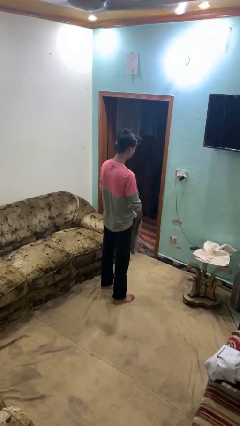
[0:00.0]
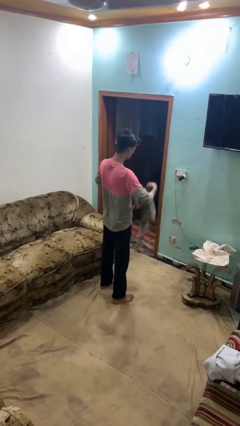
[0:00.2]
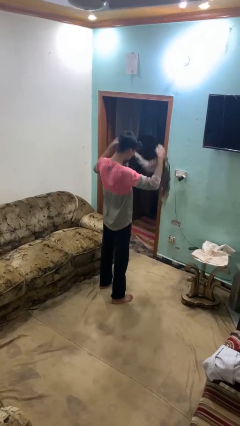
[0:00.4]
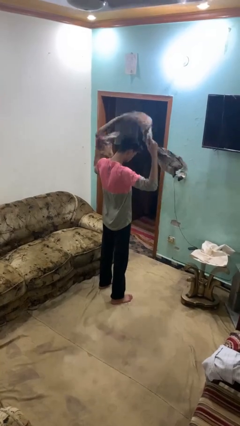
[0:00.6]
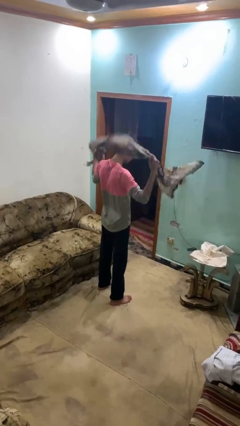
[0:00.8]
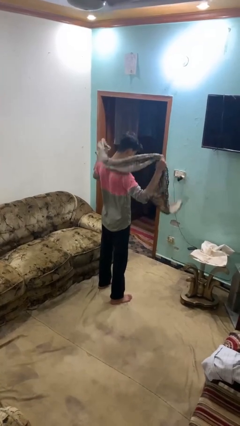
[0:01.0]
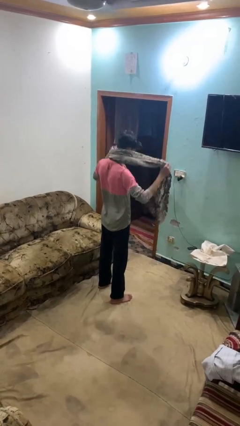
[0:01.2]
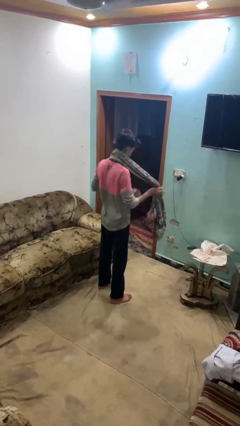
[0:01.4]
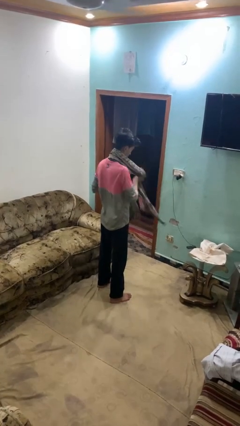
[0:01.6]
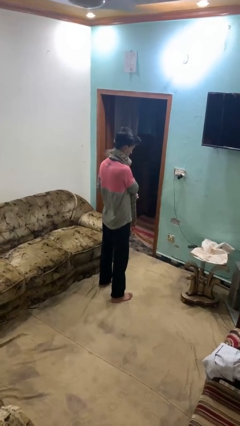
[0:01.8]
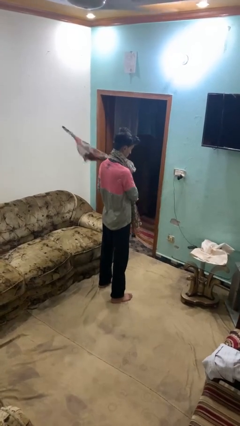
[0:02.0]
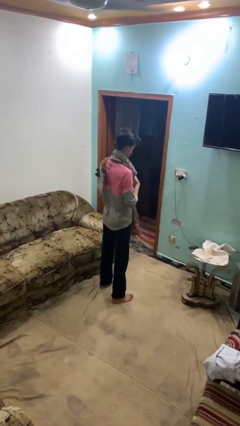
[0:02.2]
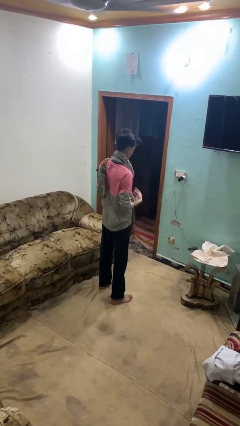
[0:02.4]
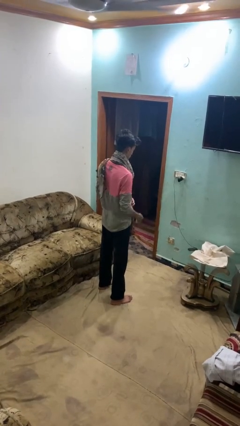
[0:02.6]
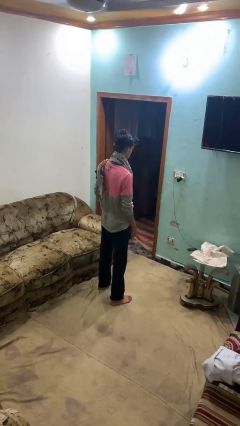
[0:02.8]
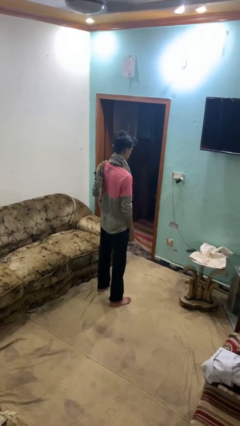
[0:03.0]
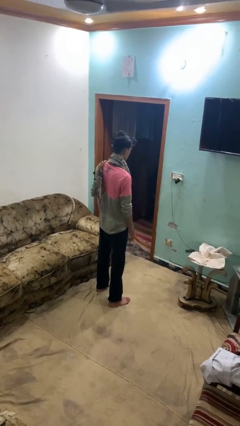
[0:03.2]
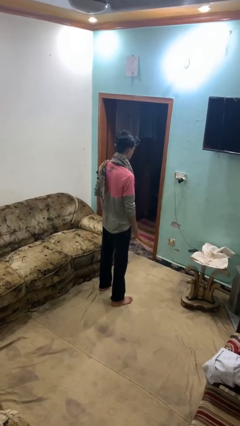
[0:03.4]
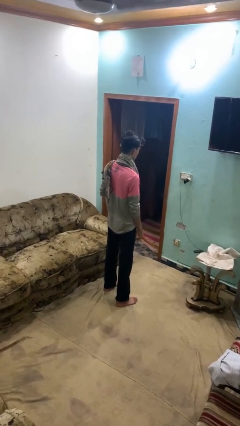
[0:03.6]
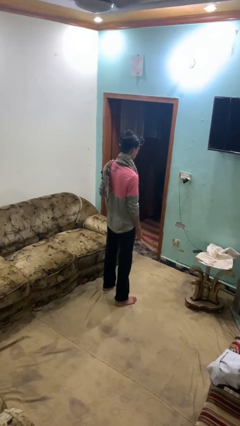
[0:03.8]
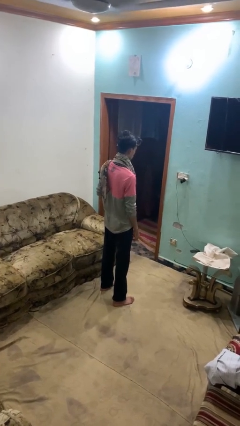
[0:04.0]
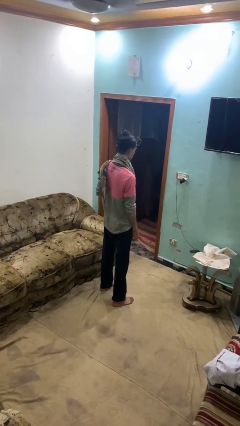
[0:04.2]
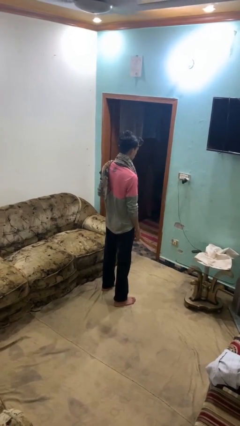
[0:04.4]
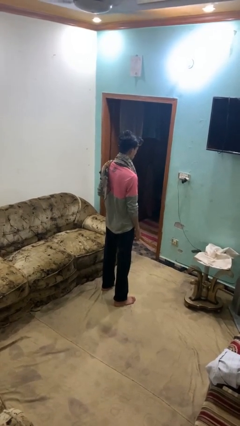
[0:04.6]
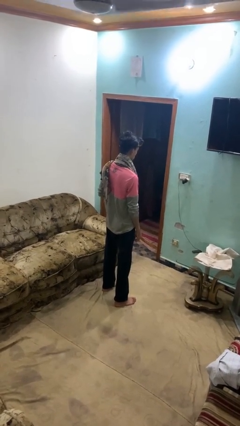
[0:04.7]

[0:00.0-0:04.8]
person puts on scarf

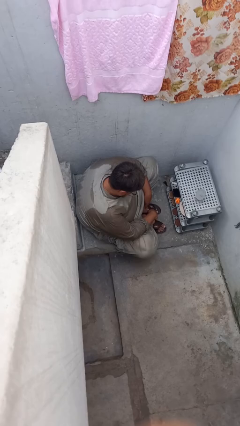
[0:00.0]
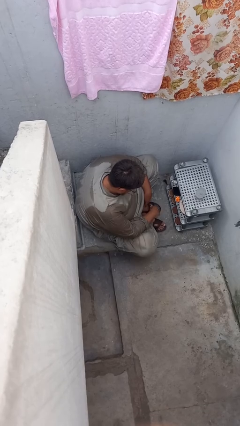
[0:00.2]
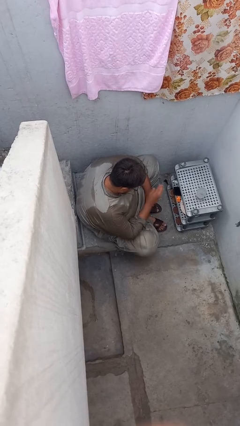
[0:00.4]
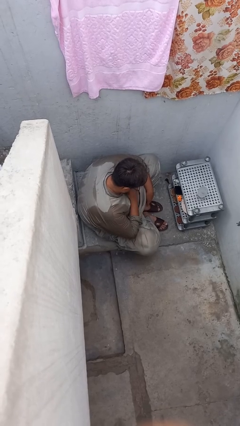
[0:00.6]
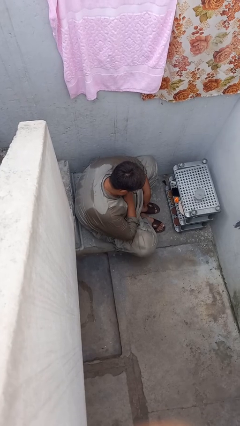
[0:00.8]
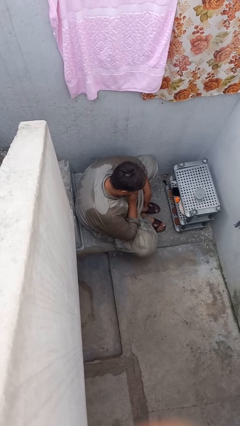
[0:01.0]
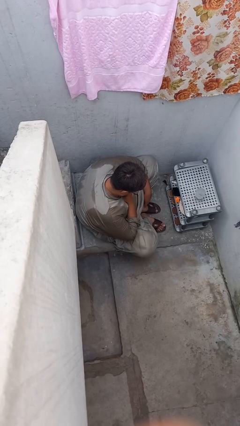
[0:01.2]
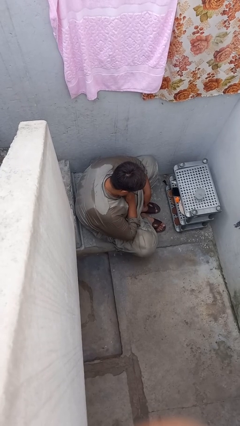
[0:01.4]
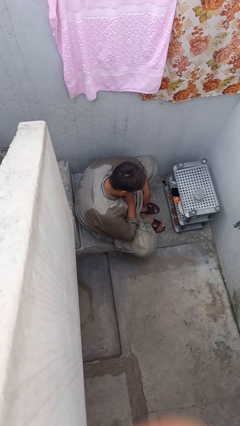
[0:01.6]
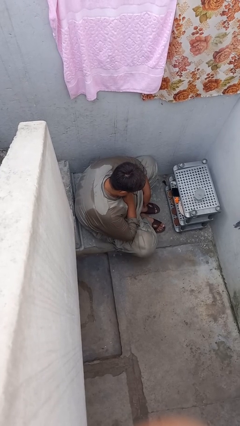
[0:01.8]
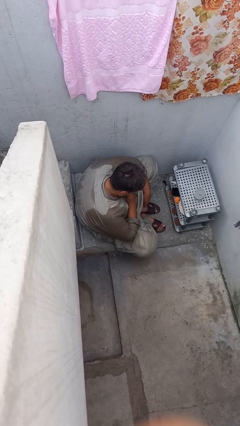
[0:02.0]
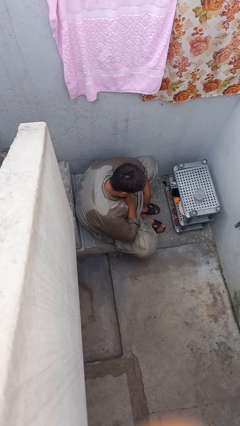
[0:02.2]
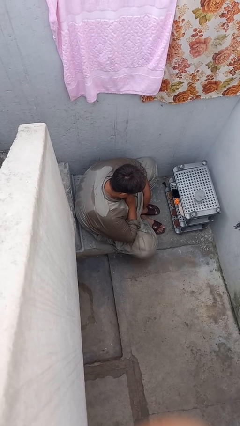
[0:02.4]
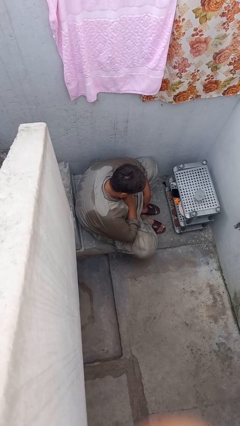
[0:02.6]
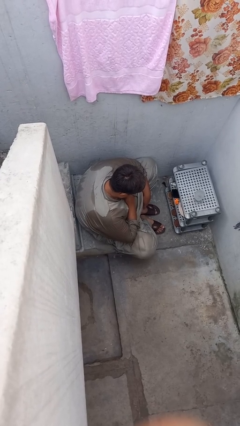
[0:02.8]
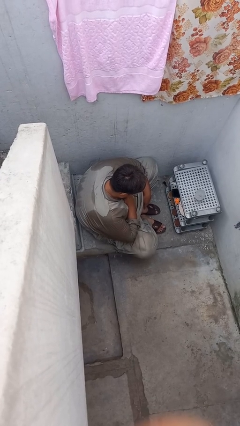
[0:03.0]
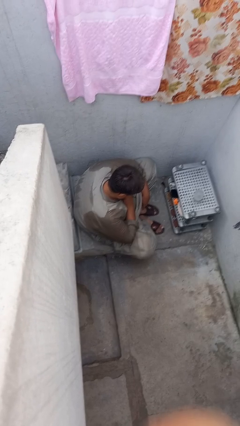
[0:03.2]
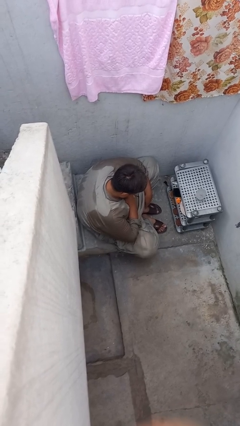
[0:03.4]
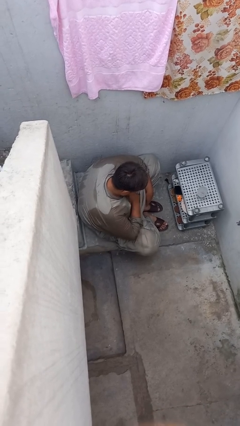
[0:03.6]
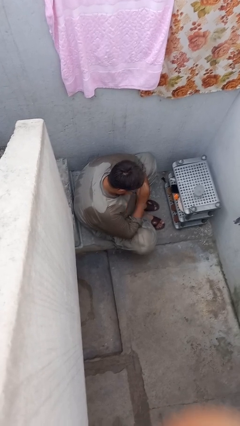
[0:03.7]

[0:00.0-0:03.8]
person drums on chest

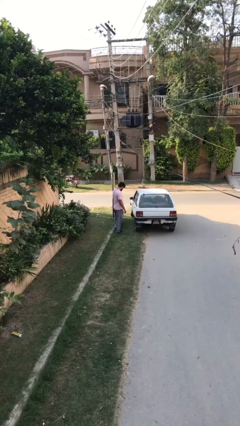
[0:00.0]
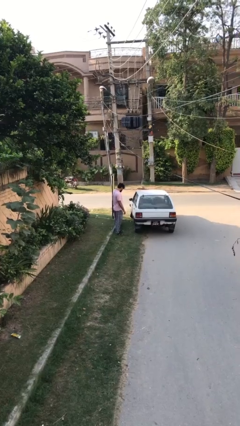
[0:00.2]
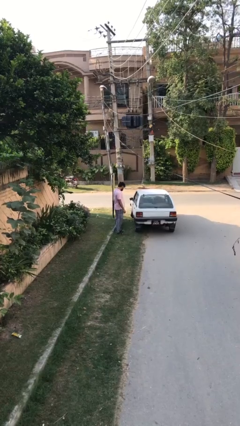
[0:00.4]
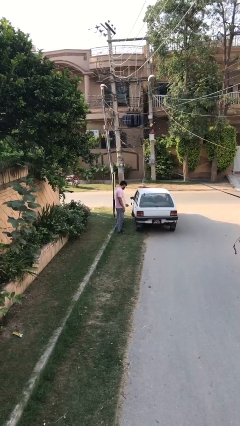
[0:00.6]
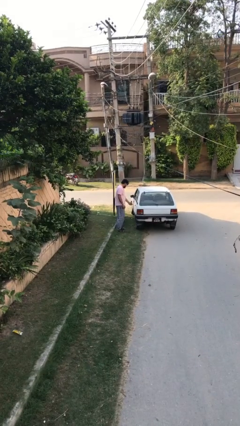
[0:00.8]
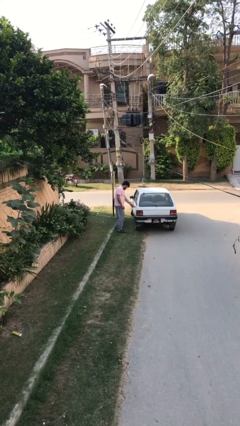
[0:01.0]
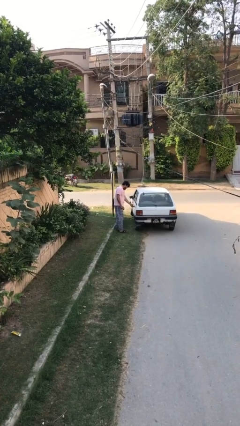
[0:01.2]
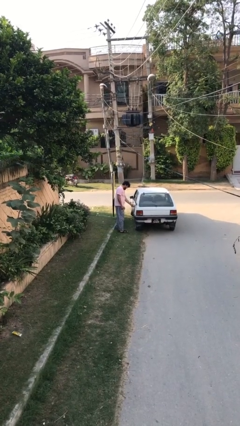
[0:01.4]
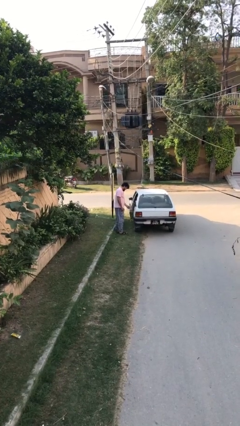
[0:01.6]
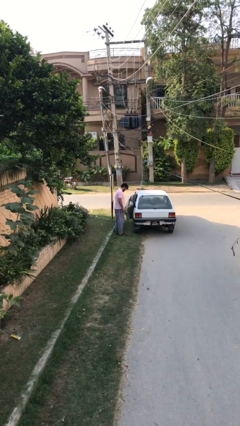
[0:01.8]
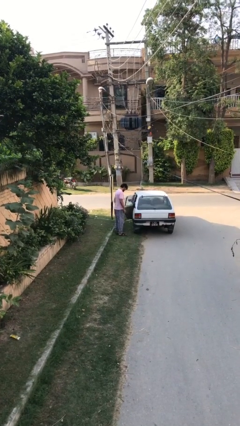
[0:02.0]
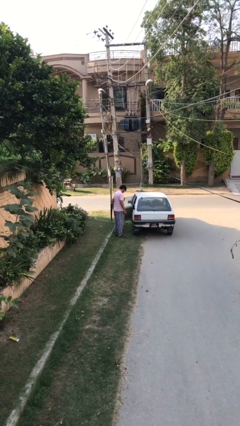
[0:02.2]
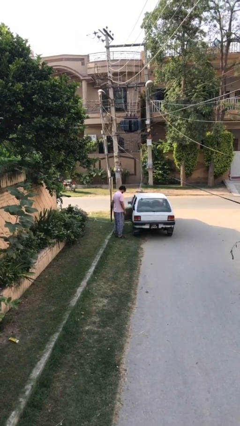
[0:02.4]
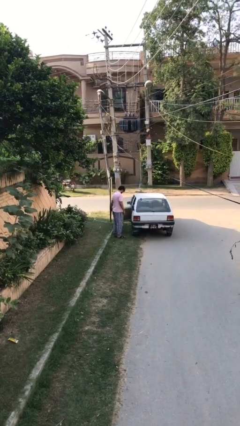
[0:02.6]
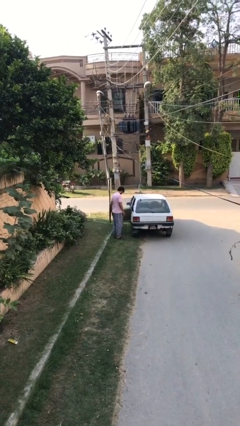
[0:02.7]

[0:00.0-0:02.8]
person opens car door

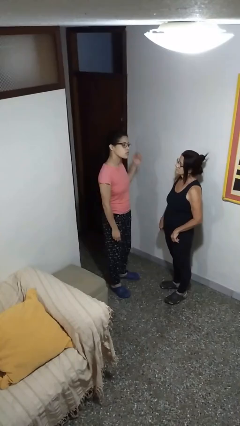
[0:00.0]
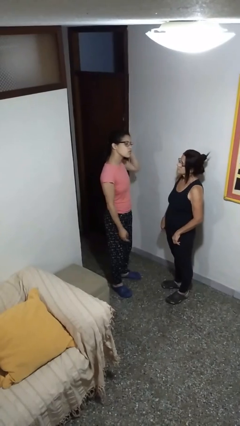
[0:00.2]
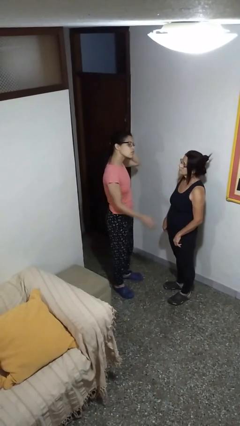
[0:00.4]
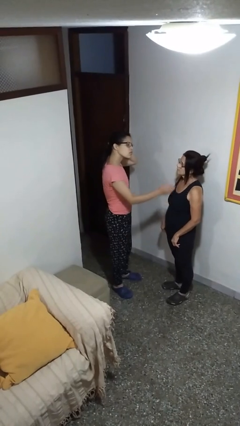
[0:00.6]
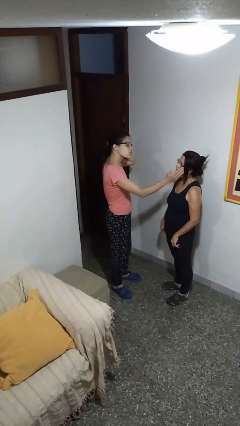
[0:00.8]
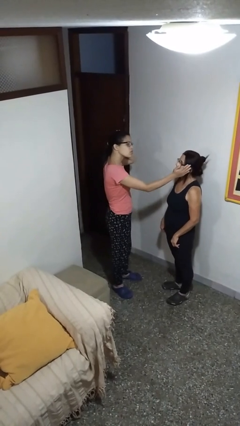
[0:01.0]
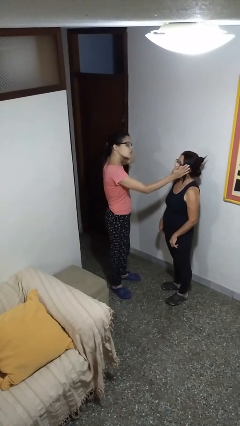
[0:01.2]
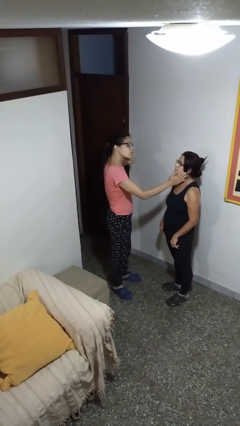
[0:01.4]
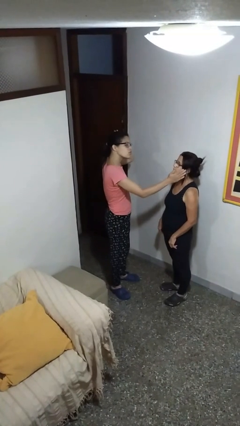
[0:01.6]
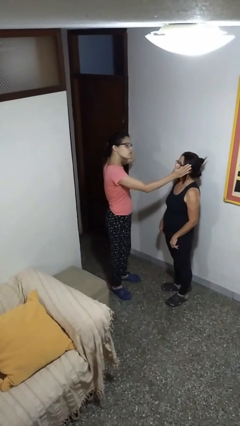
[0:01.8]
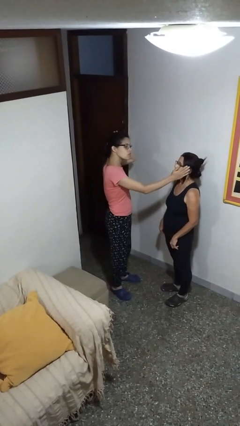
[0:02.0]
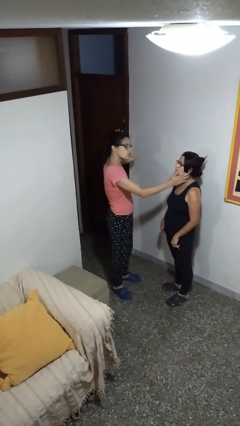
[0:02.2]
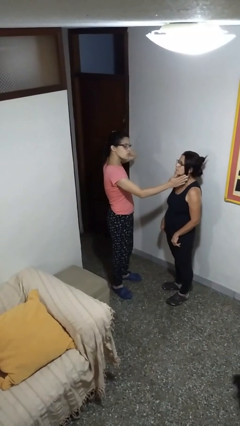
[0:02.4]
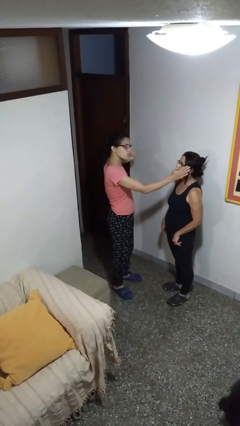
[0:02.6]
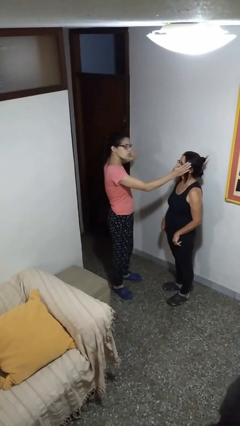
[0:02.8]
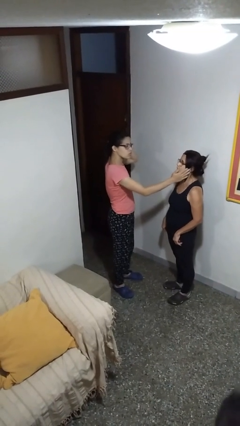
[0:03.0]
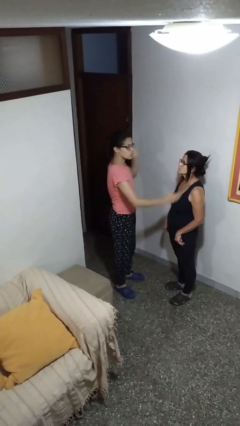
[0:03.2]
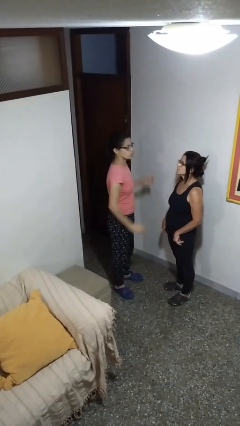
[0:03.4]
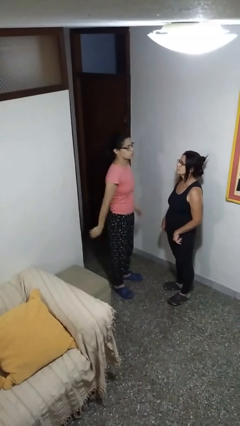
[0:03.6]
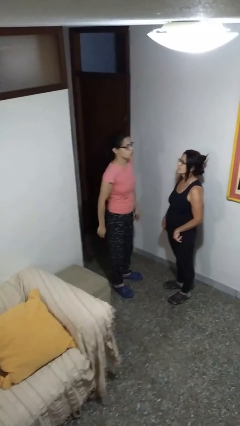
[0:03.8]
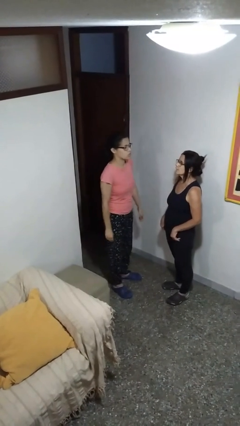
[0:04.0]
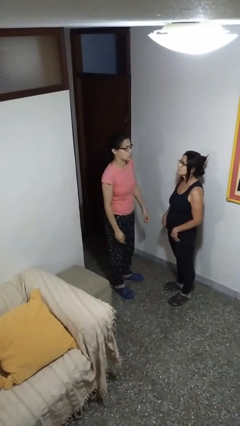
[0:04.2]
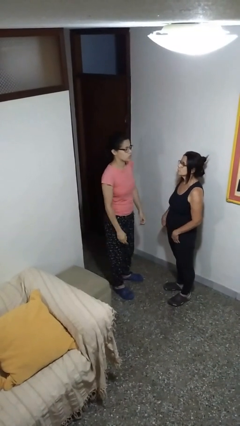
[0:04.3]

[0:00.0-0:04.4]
person touches face of person

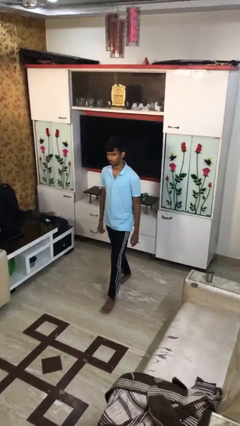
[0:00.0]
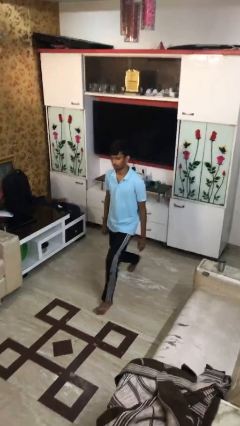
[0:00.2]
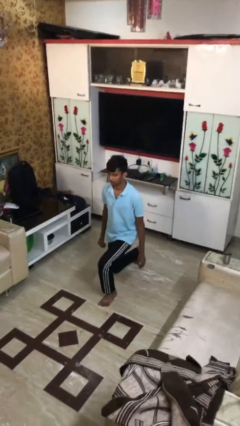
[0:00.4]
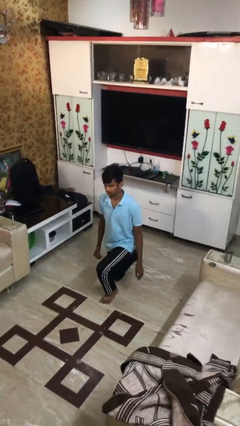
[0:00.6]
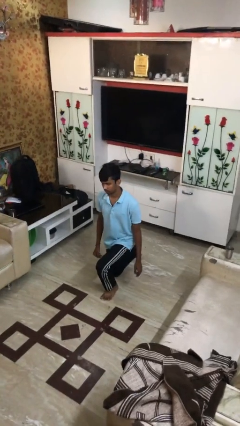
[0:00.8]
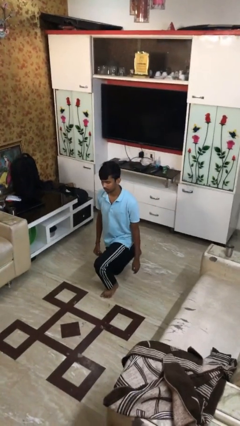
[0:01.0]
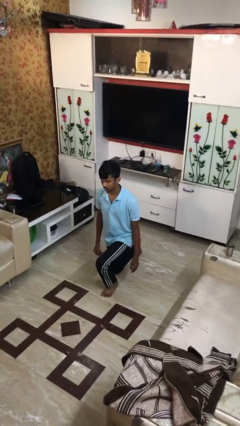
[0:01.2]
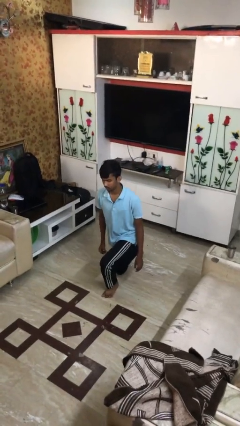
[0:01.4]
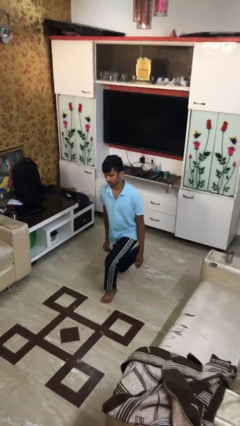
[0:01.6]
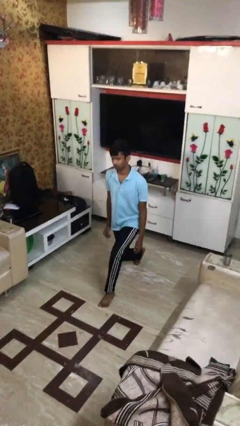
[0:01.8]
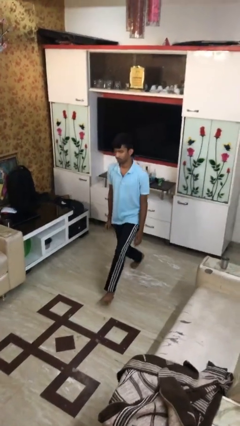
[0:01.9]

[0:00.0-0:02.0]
person exercises with lunges
